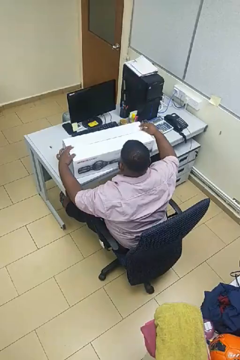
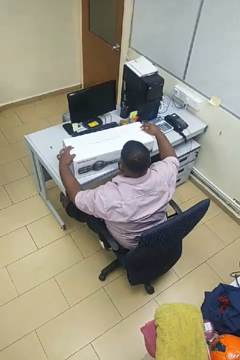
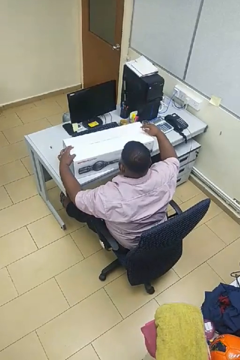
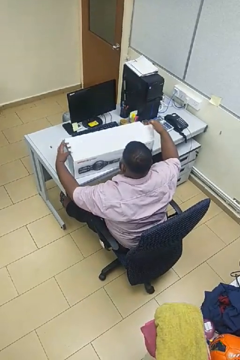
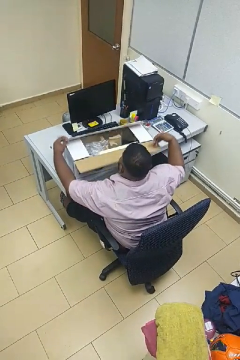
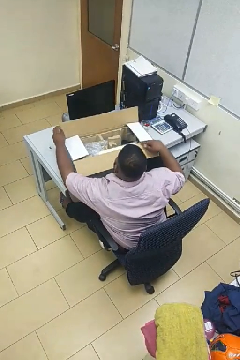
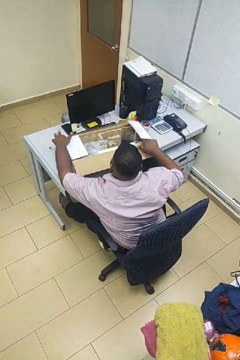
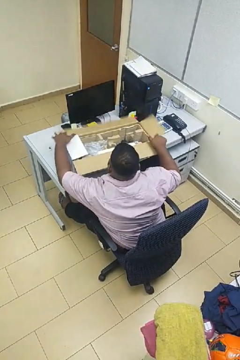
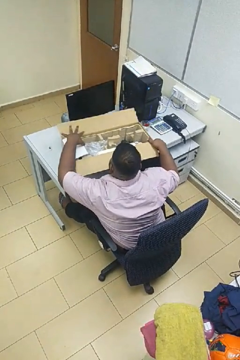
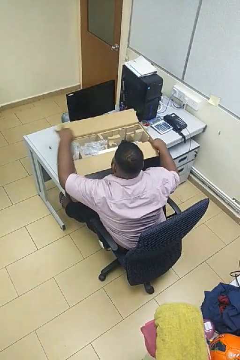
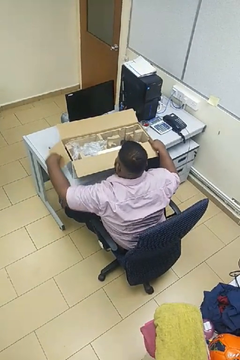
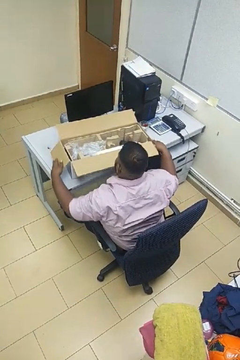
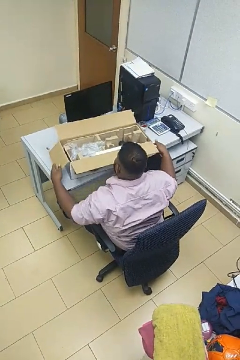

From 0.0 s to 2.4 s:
person opens box

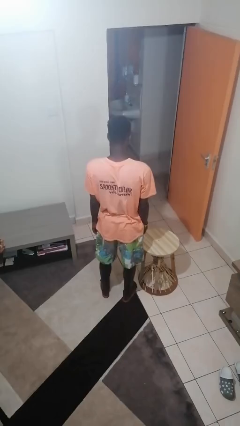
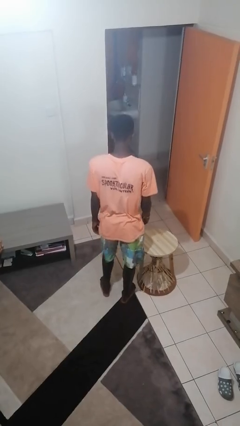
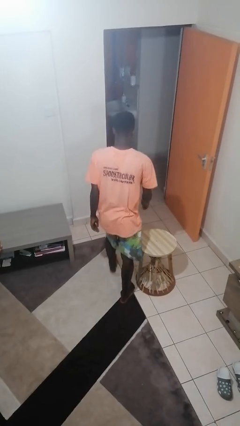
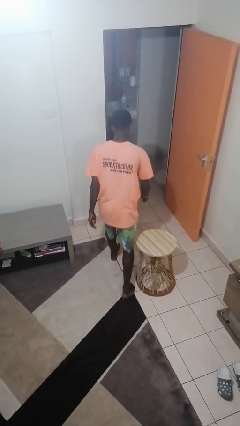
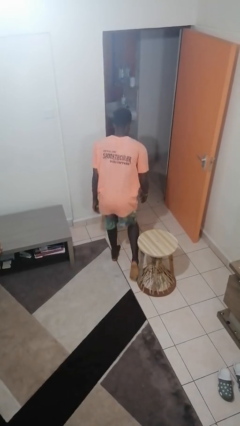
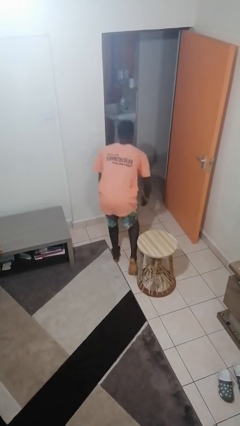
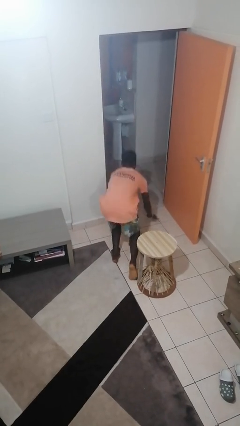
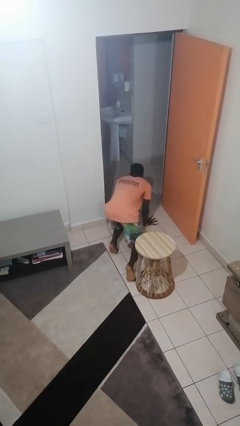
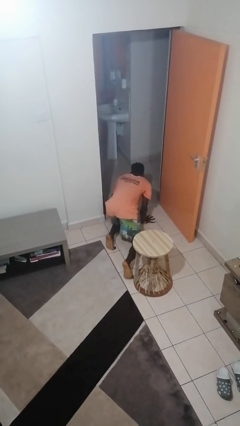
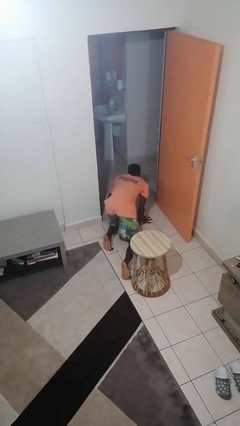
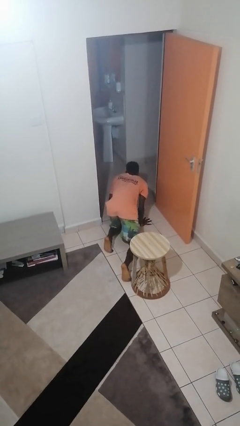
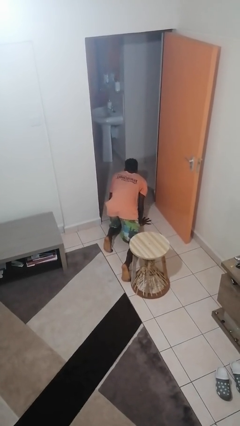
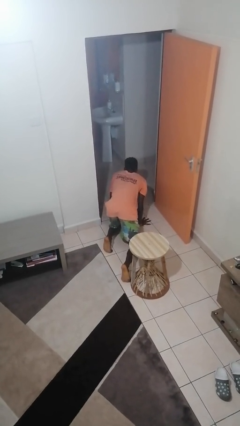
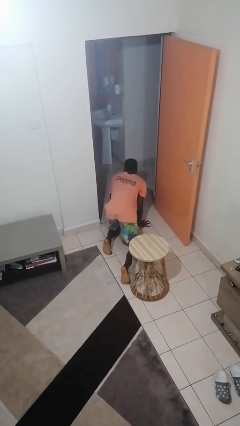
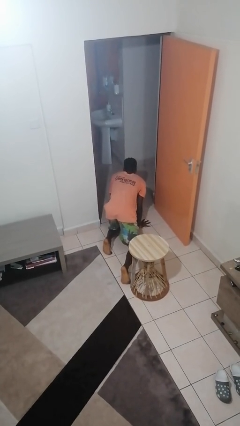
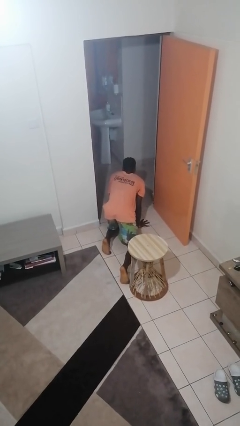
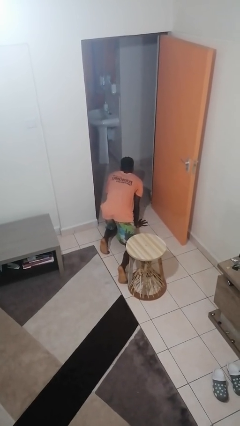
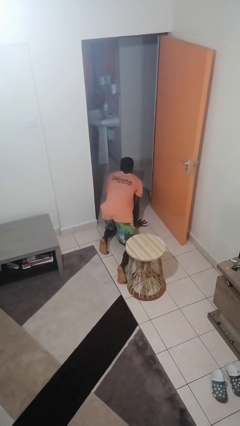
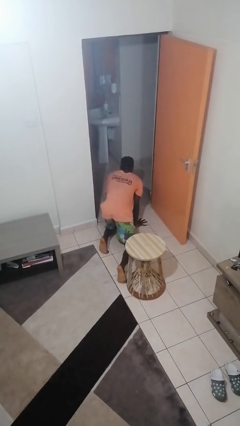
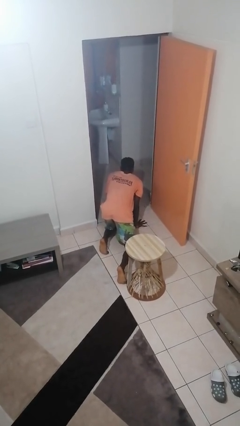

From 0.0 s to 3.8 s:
person trips on object on floor

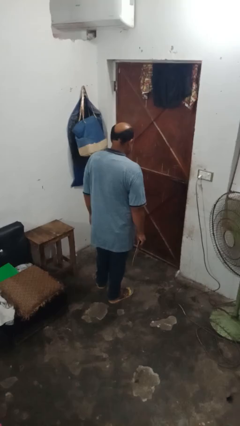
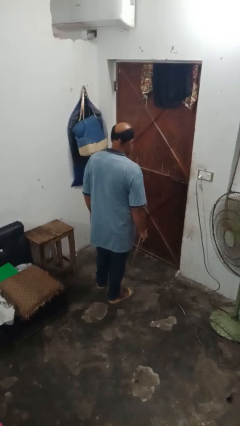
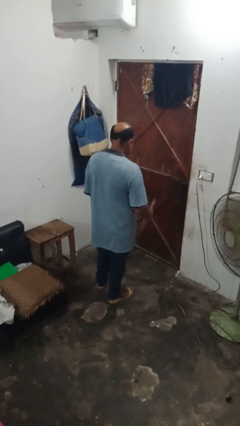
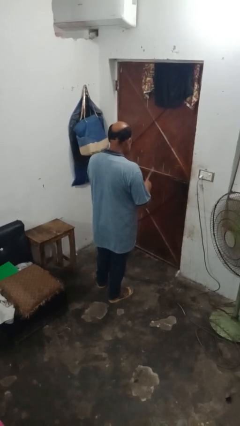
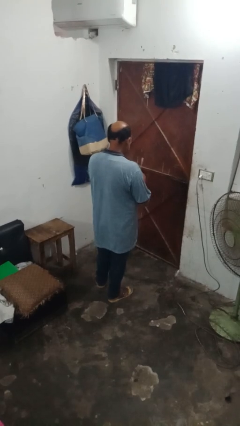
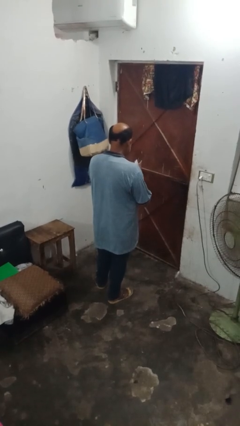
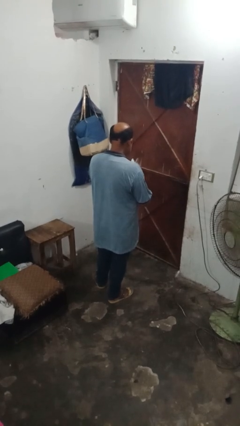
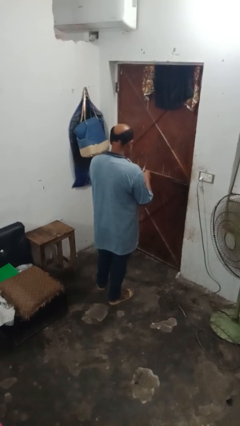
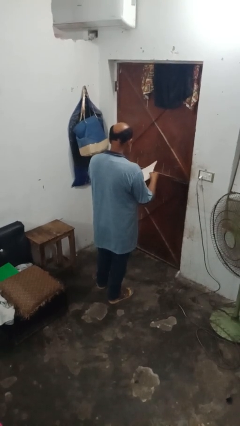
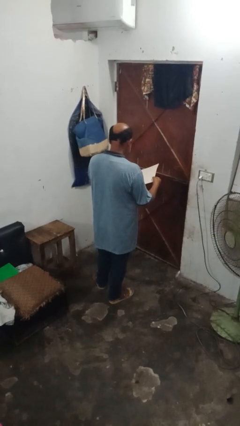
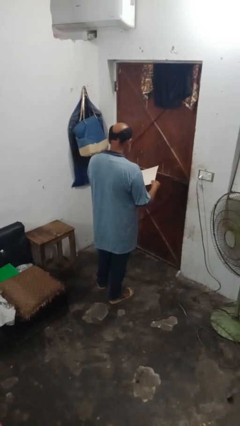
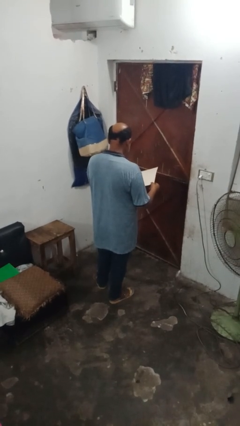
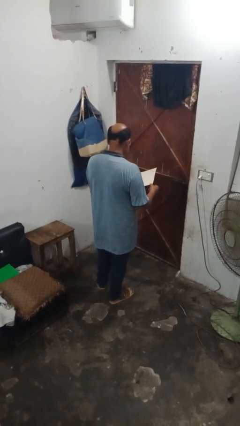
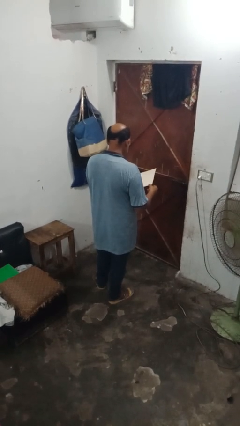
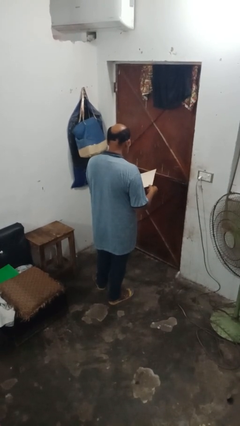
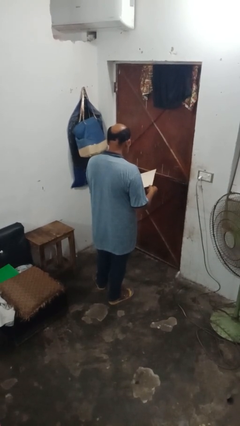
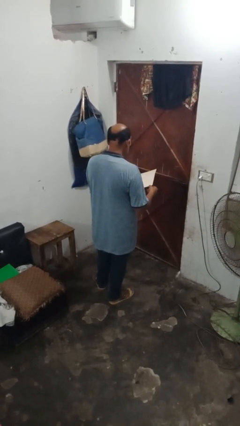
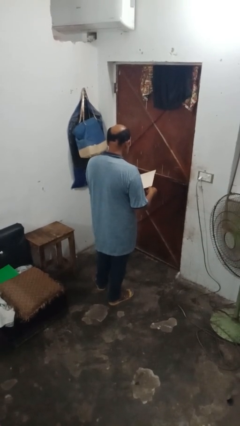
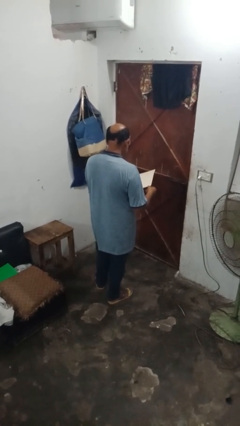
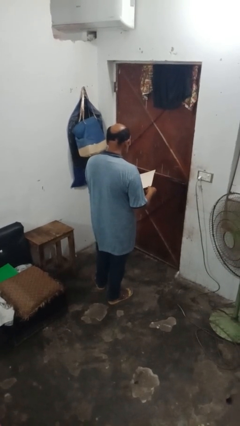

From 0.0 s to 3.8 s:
person reads magazine

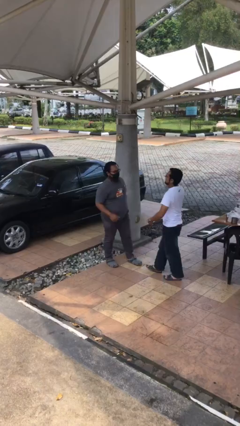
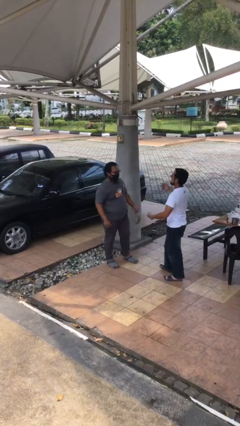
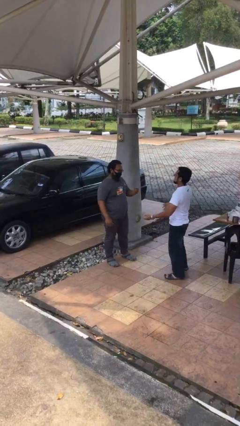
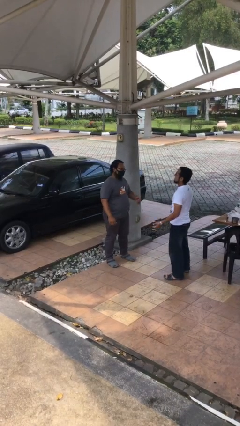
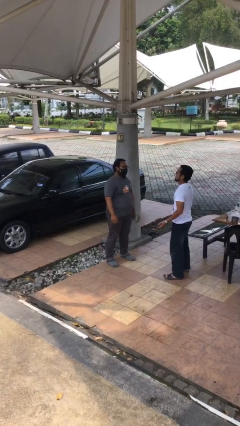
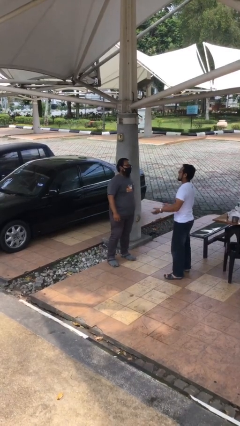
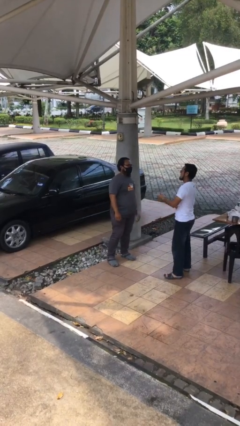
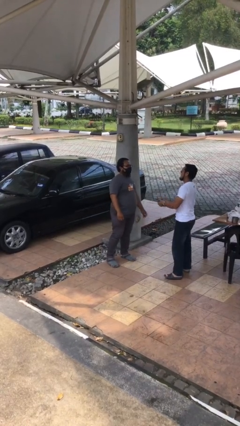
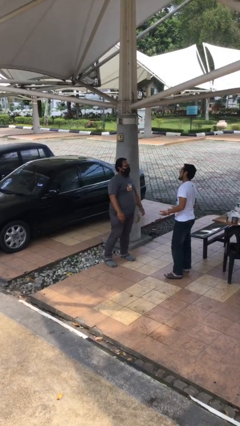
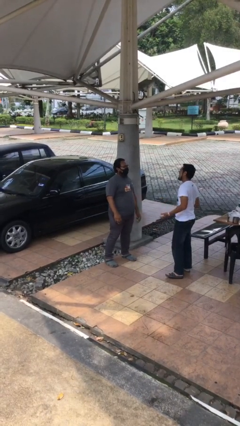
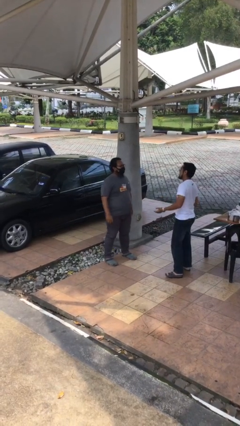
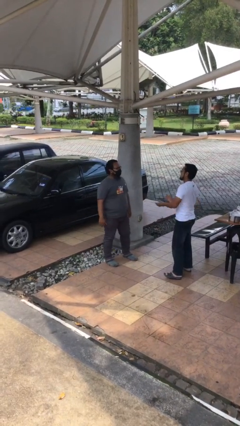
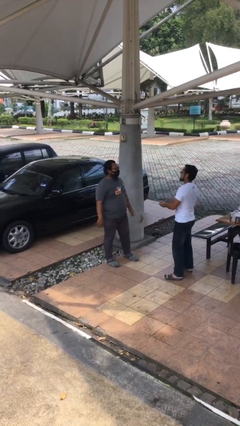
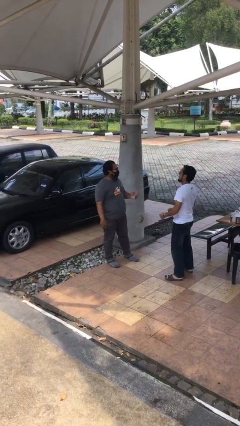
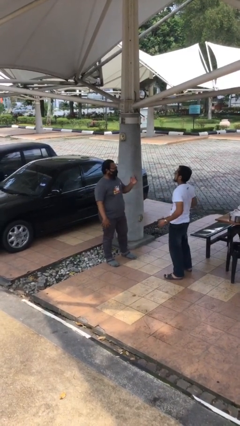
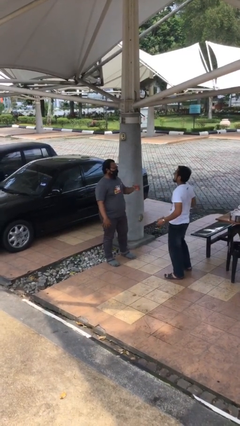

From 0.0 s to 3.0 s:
person talks to person

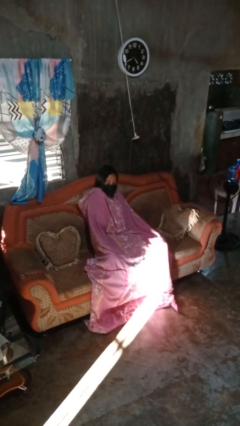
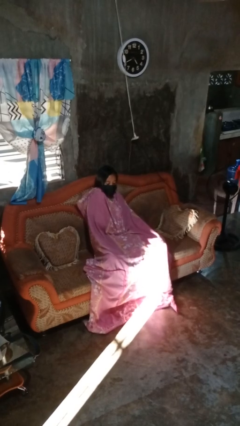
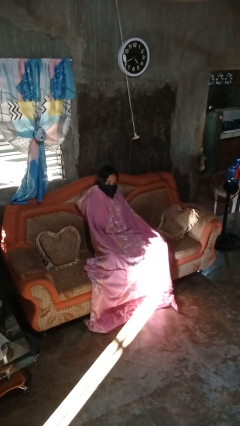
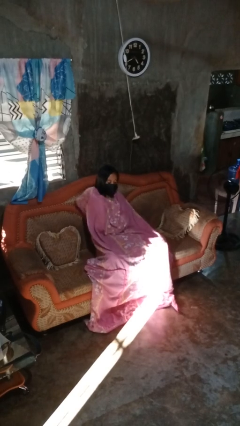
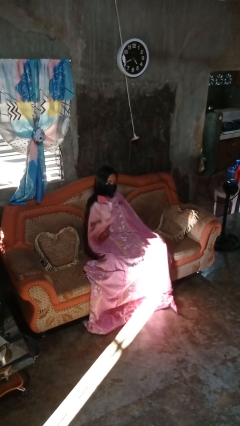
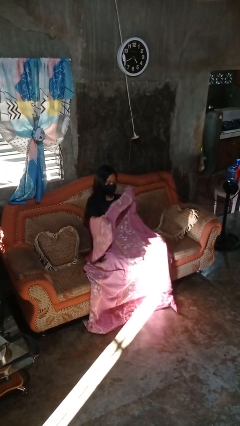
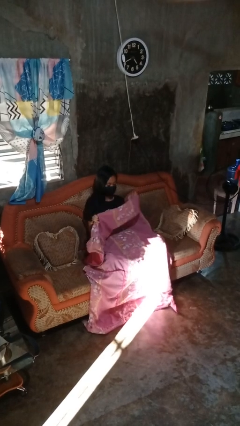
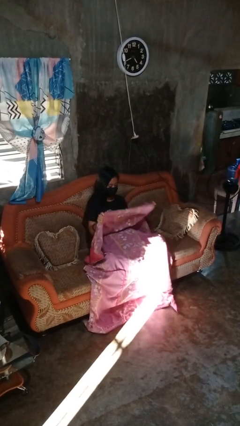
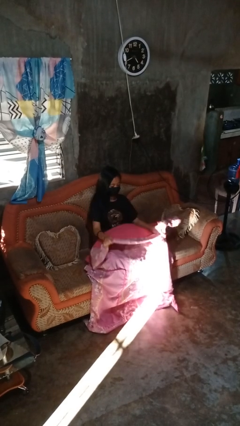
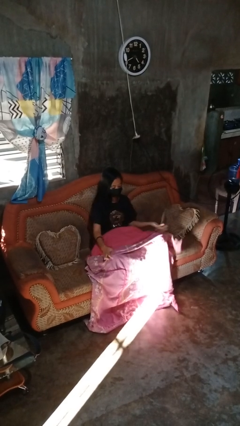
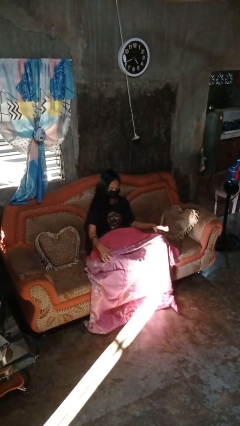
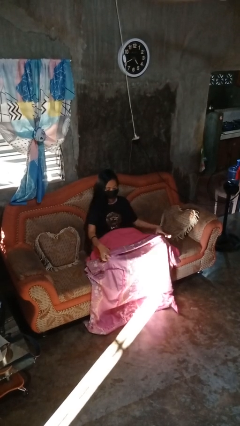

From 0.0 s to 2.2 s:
person uncovers with blanket

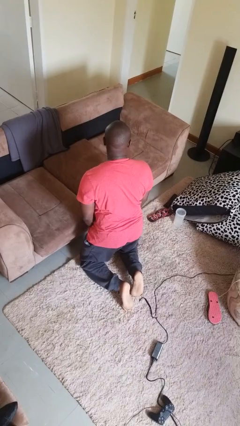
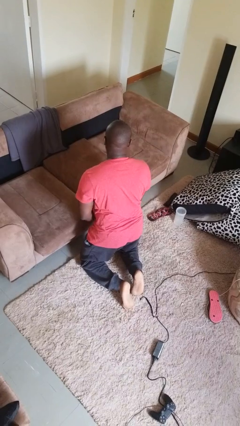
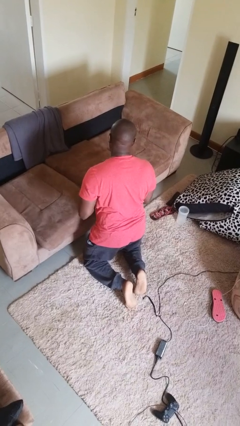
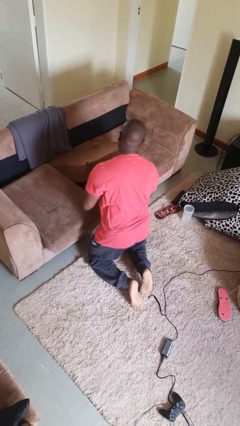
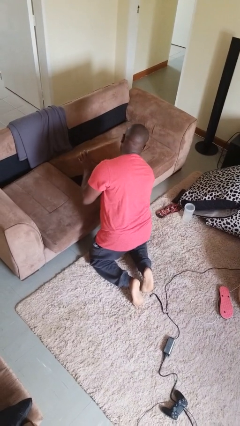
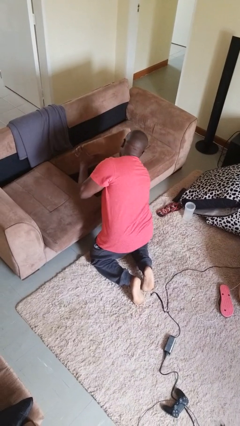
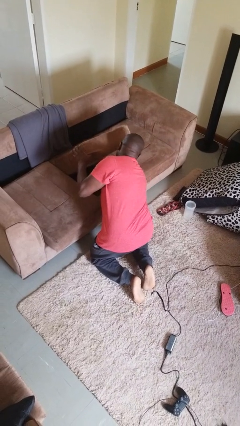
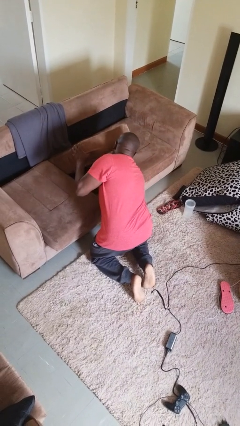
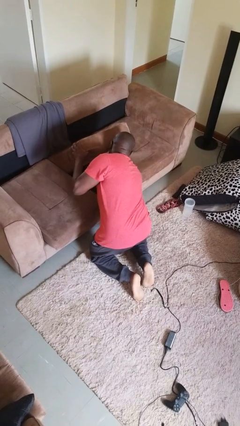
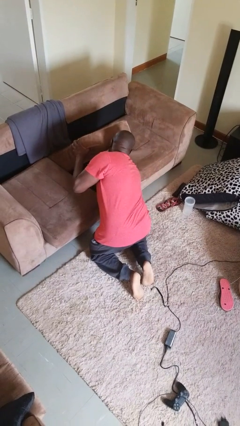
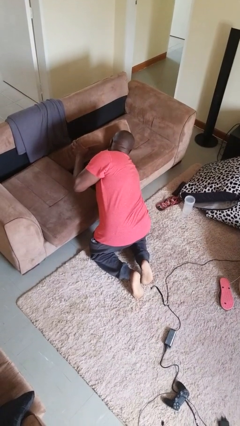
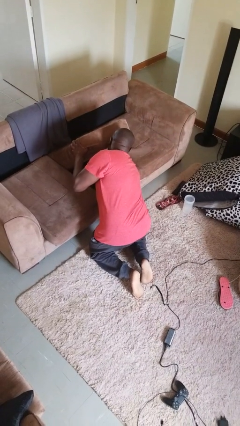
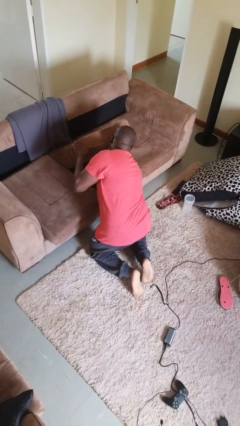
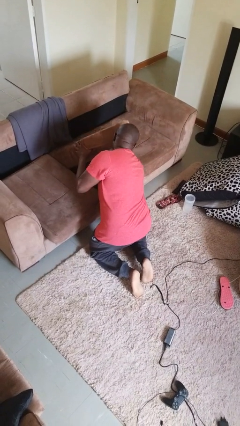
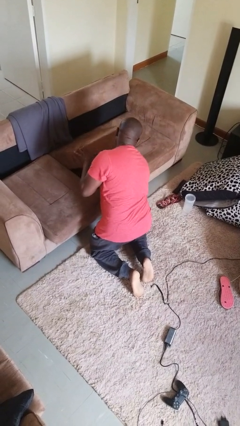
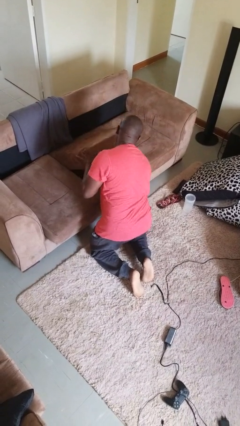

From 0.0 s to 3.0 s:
person searches under couch
